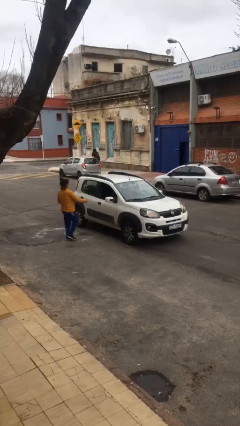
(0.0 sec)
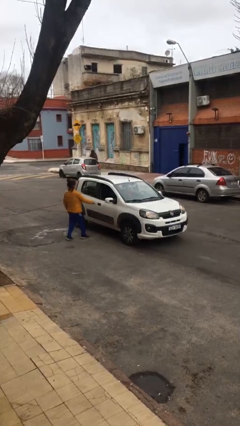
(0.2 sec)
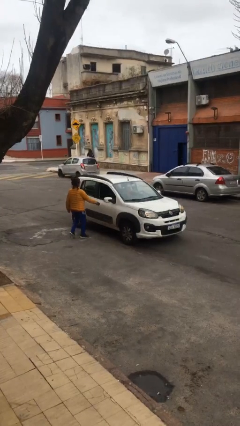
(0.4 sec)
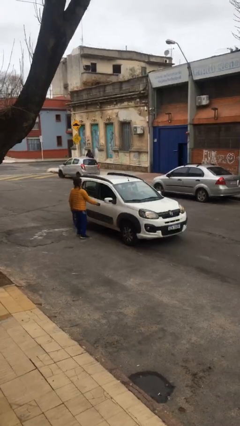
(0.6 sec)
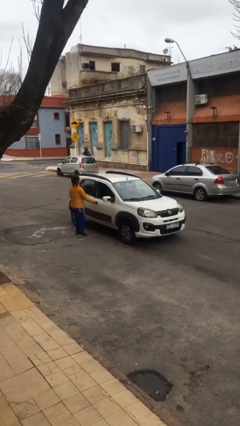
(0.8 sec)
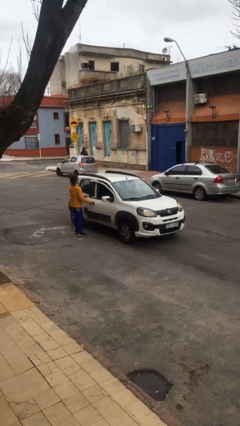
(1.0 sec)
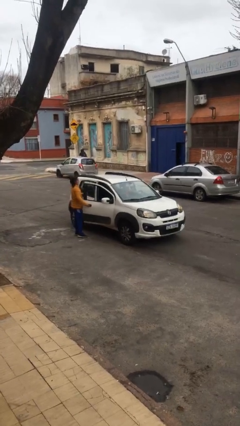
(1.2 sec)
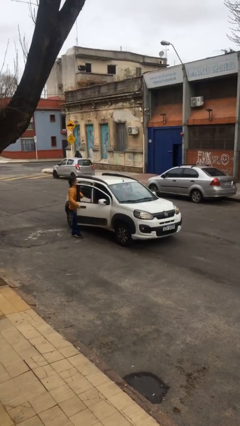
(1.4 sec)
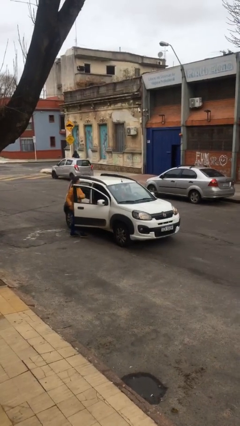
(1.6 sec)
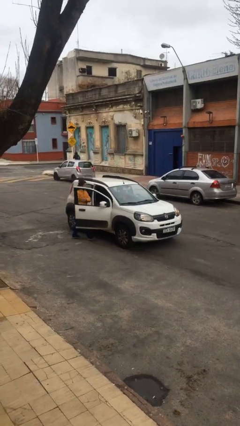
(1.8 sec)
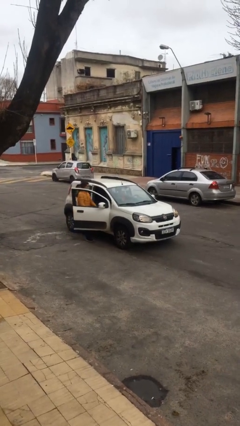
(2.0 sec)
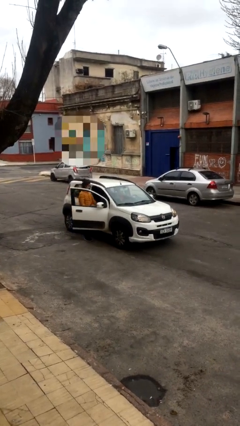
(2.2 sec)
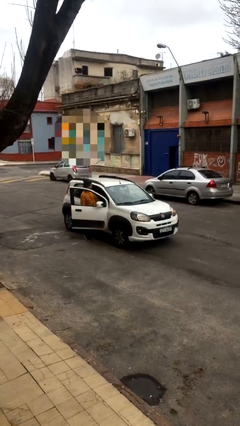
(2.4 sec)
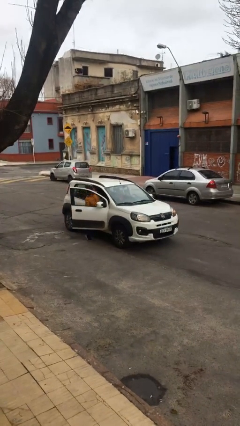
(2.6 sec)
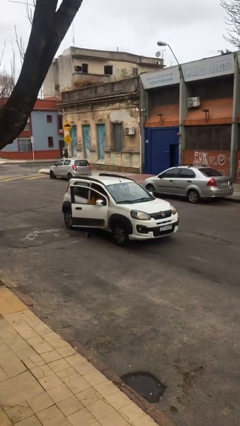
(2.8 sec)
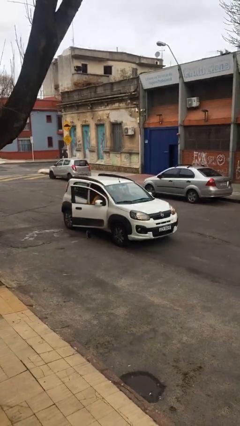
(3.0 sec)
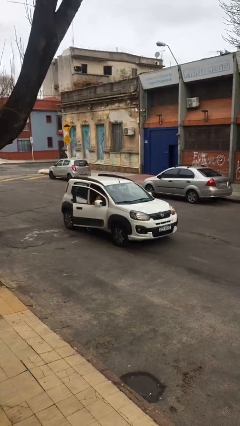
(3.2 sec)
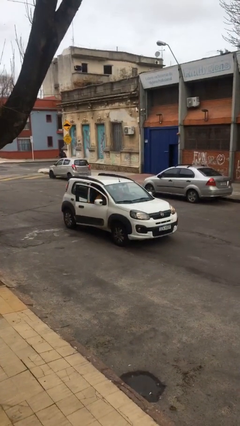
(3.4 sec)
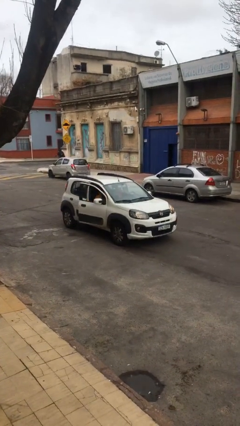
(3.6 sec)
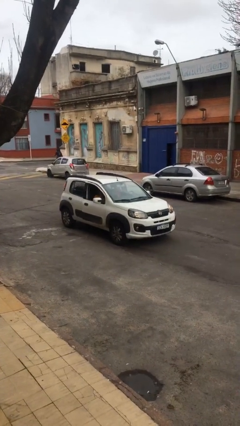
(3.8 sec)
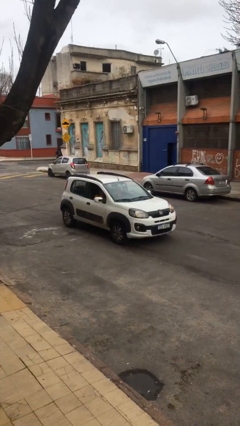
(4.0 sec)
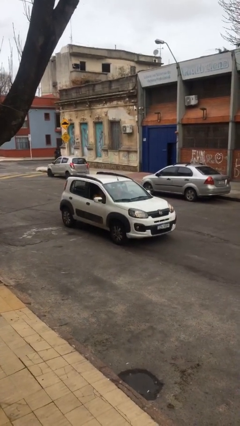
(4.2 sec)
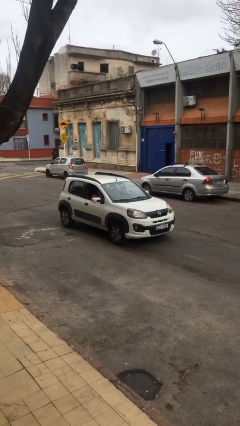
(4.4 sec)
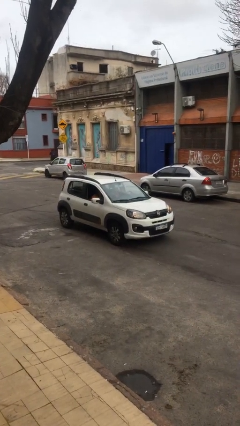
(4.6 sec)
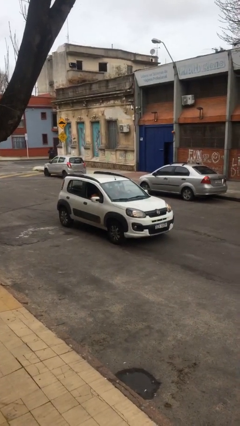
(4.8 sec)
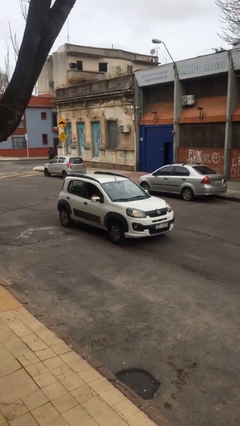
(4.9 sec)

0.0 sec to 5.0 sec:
car picks up person

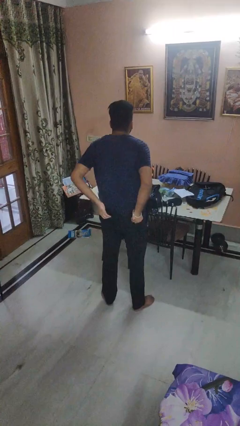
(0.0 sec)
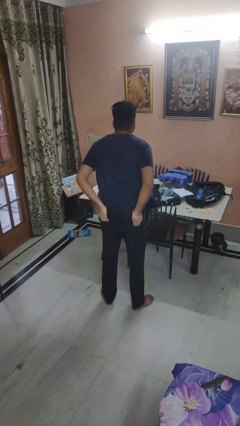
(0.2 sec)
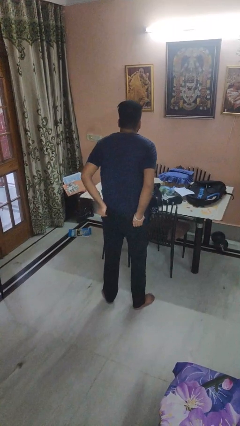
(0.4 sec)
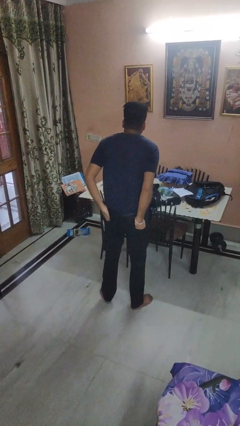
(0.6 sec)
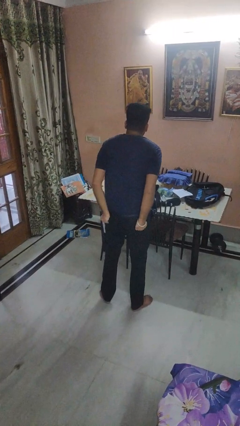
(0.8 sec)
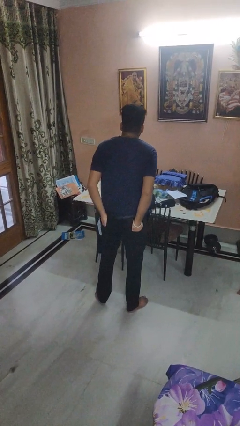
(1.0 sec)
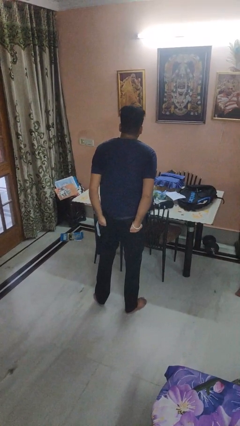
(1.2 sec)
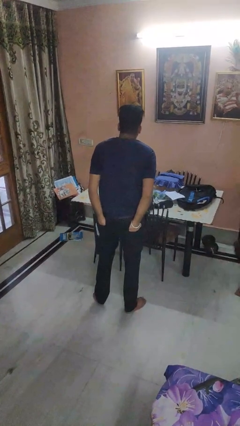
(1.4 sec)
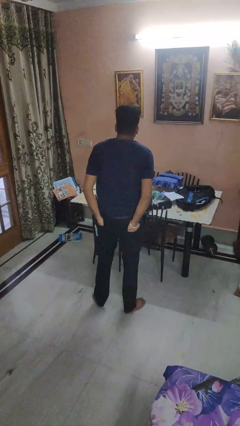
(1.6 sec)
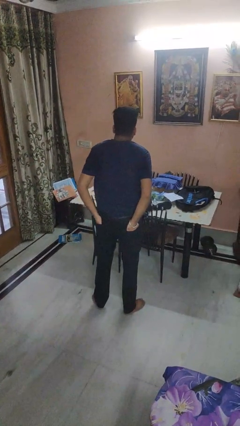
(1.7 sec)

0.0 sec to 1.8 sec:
person puts hands in back pockets

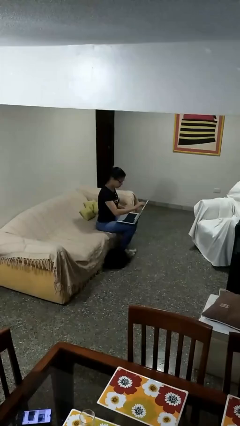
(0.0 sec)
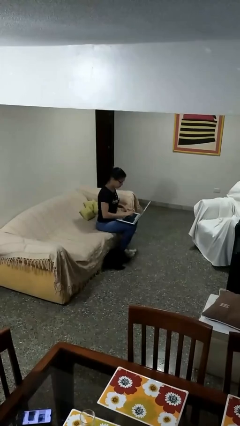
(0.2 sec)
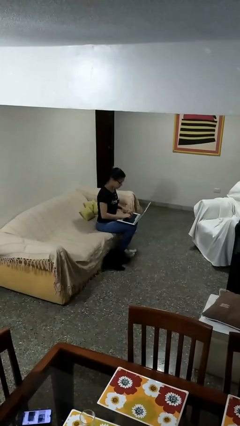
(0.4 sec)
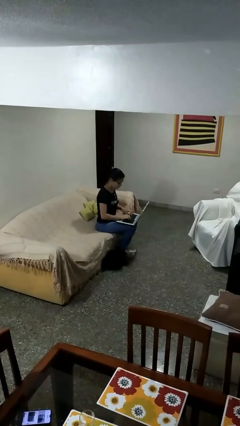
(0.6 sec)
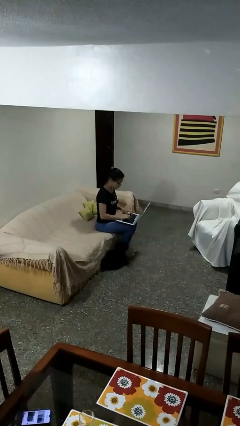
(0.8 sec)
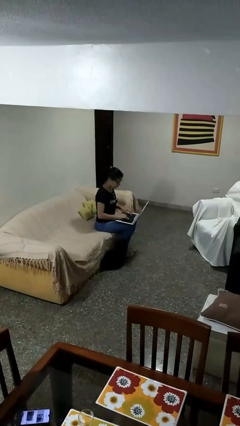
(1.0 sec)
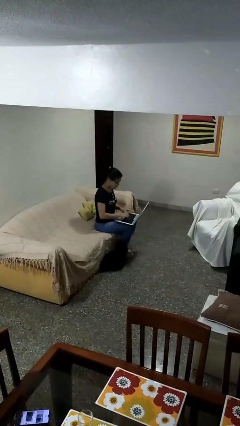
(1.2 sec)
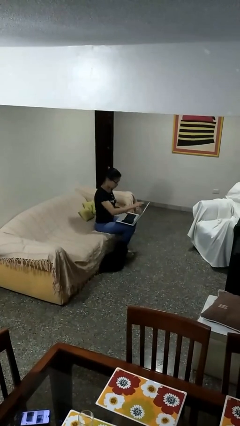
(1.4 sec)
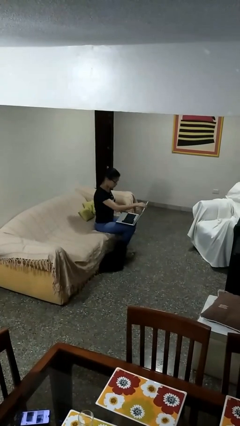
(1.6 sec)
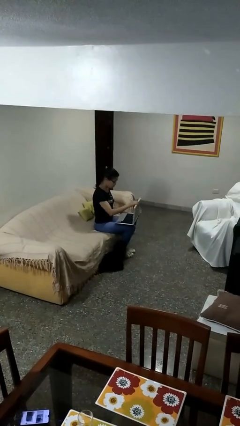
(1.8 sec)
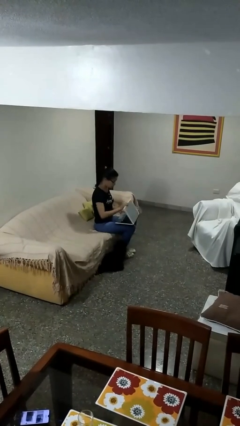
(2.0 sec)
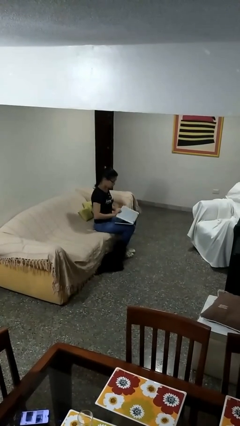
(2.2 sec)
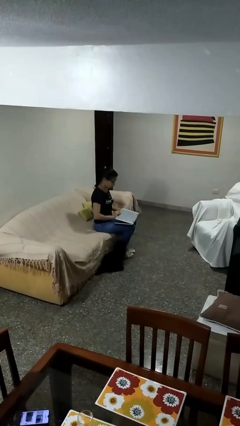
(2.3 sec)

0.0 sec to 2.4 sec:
person interacts with laptop

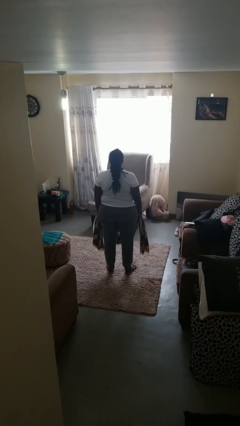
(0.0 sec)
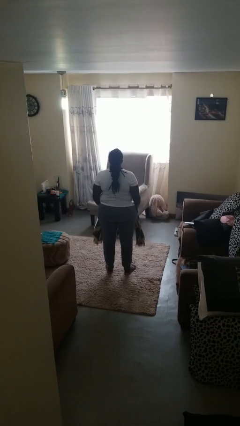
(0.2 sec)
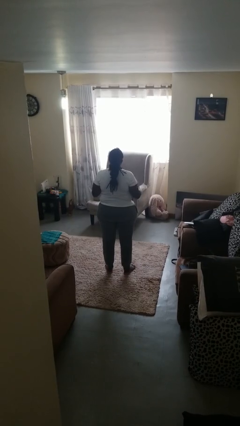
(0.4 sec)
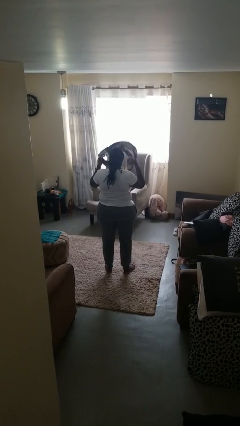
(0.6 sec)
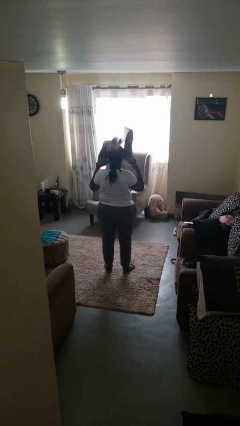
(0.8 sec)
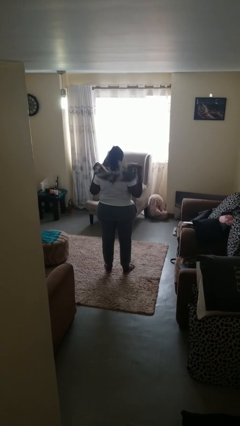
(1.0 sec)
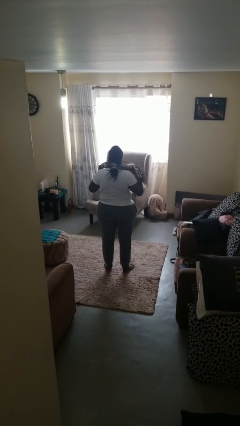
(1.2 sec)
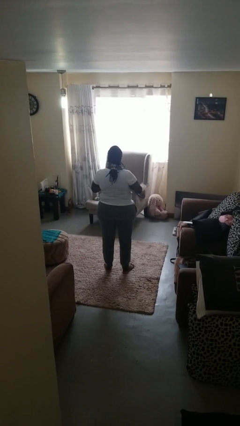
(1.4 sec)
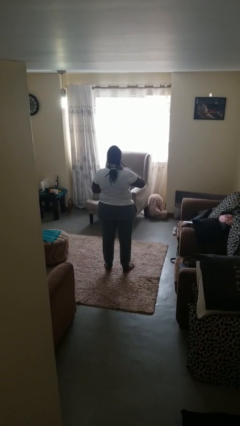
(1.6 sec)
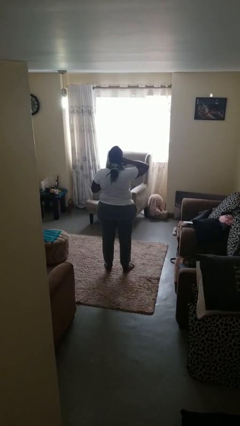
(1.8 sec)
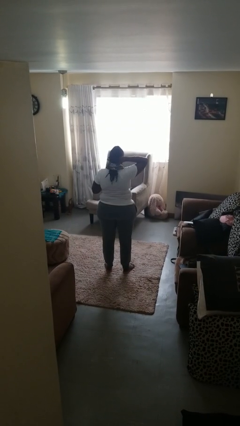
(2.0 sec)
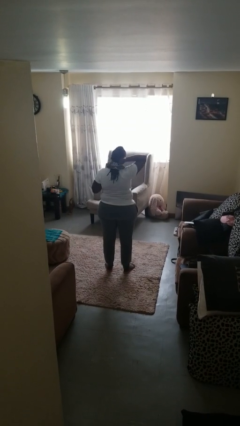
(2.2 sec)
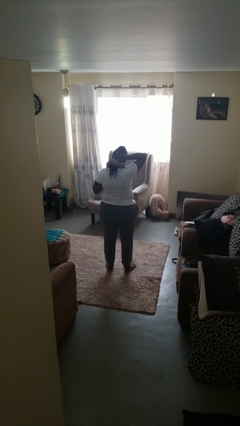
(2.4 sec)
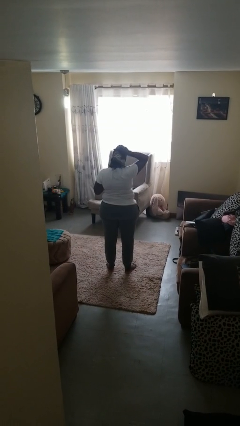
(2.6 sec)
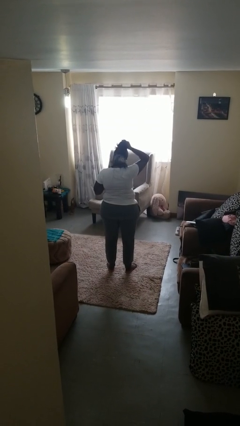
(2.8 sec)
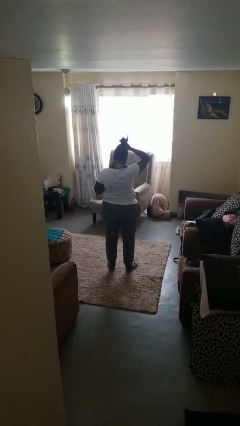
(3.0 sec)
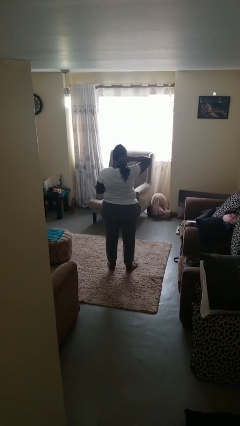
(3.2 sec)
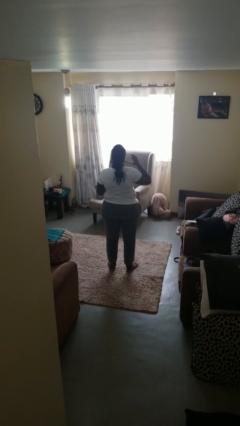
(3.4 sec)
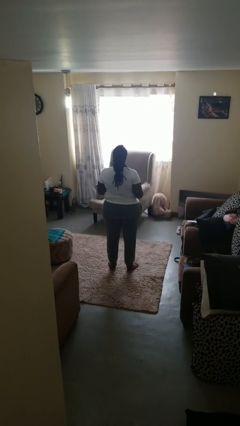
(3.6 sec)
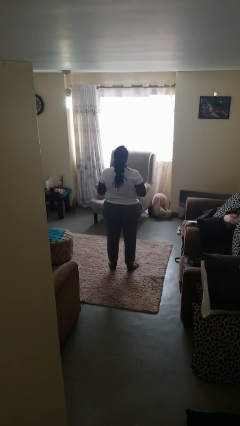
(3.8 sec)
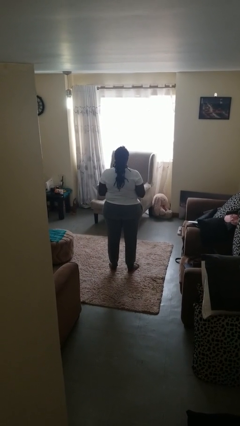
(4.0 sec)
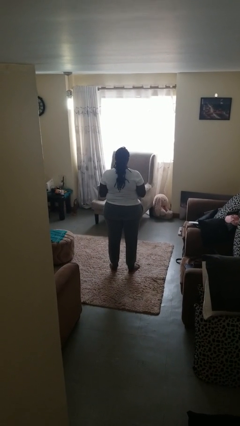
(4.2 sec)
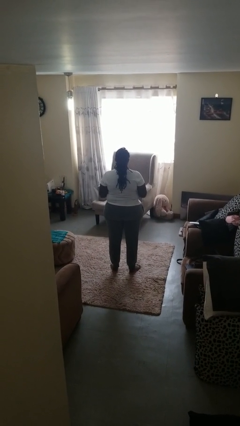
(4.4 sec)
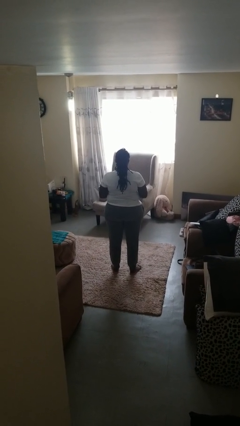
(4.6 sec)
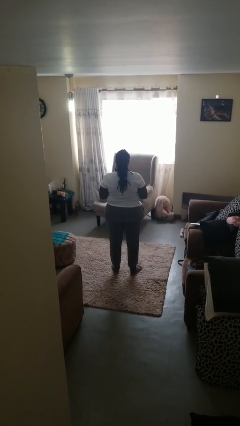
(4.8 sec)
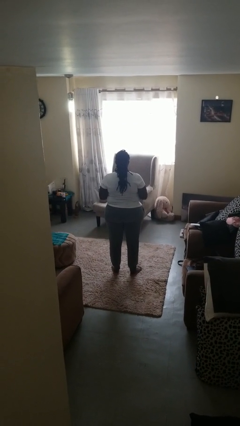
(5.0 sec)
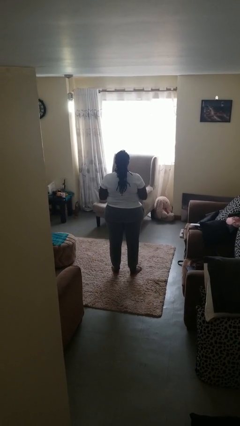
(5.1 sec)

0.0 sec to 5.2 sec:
person puts on scarf

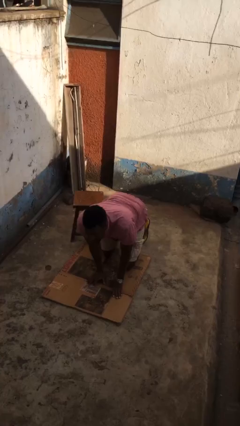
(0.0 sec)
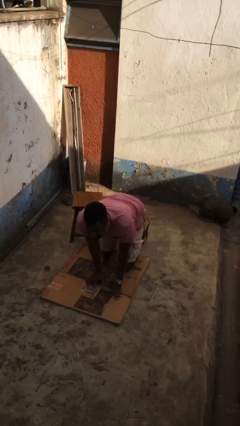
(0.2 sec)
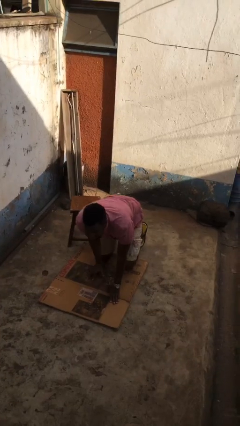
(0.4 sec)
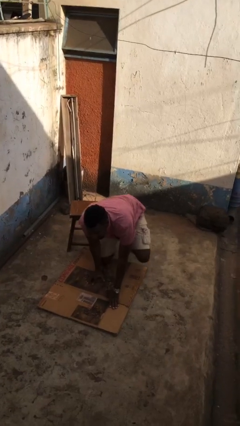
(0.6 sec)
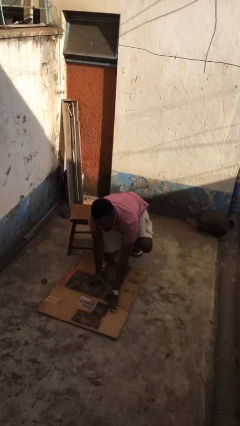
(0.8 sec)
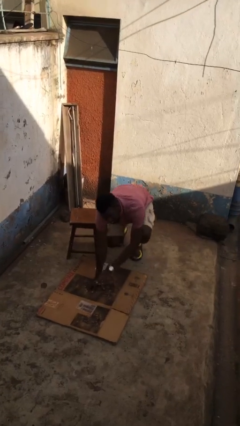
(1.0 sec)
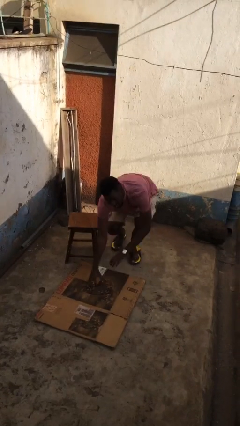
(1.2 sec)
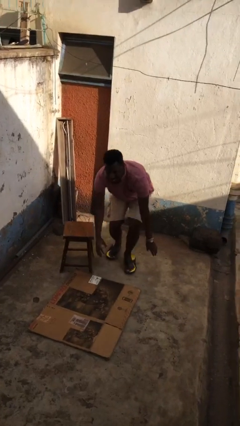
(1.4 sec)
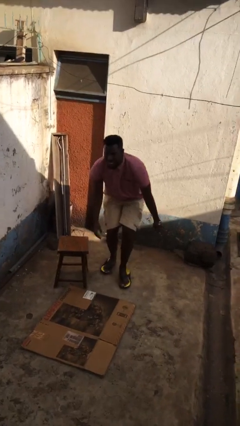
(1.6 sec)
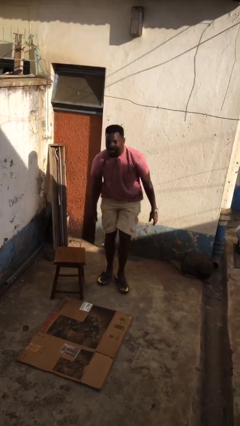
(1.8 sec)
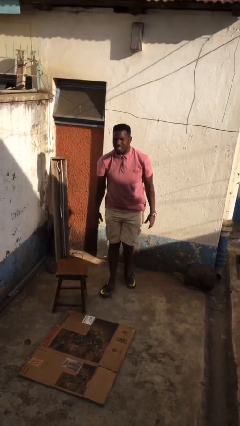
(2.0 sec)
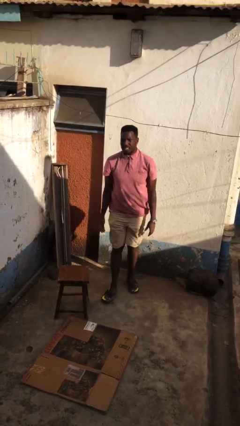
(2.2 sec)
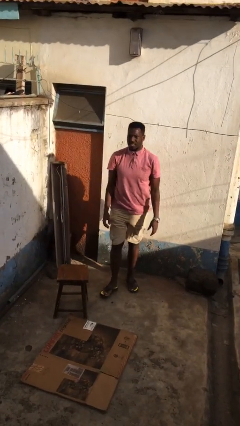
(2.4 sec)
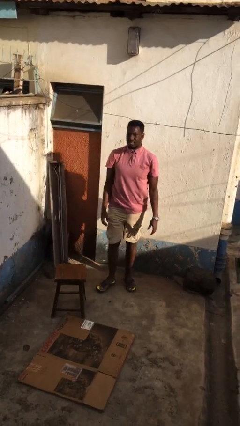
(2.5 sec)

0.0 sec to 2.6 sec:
person stands up from floor

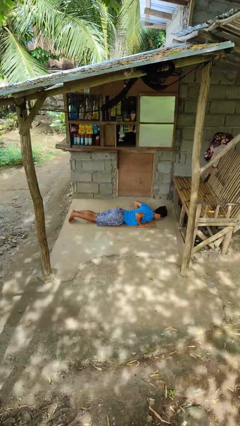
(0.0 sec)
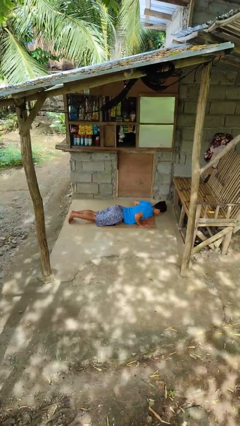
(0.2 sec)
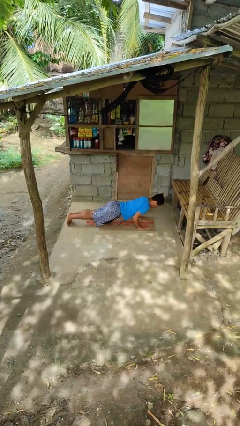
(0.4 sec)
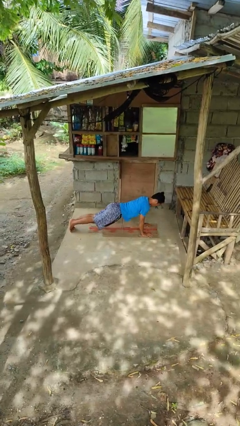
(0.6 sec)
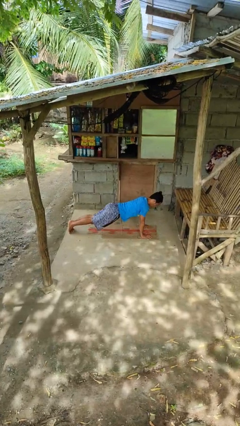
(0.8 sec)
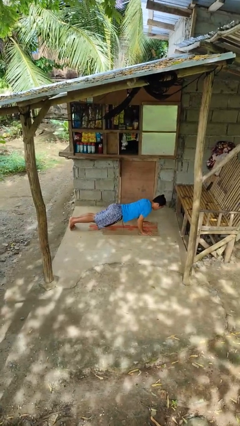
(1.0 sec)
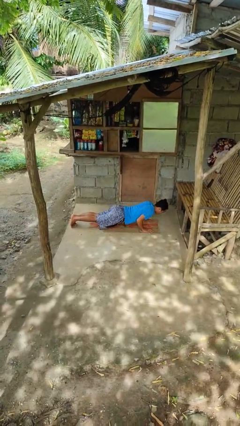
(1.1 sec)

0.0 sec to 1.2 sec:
person exercises with pushup
